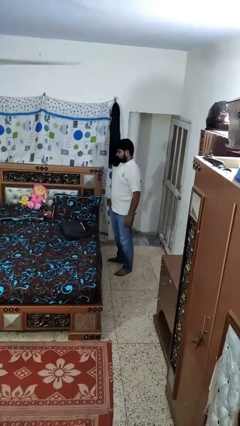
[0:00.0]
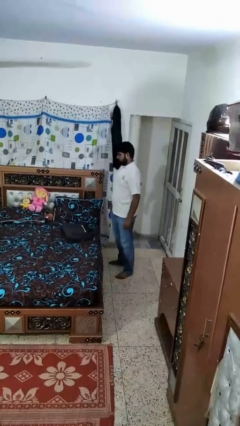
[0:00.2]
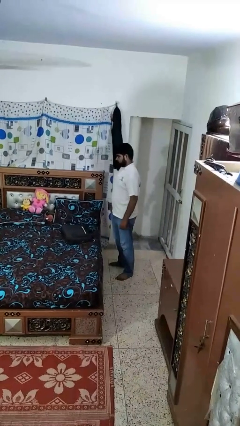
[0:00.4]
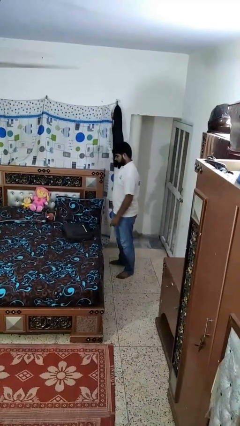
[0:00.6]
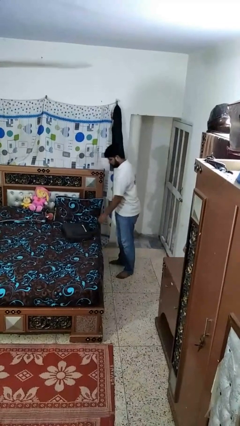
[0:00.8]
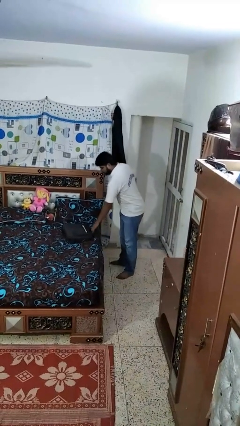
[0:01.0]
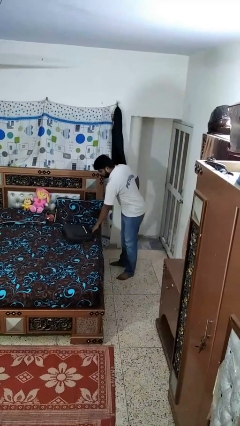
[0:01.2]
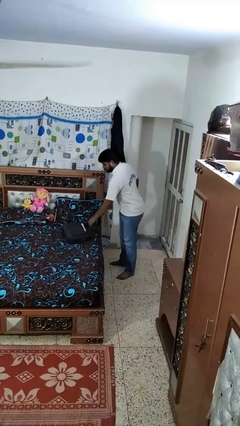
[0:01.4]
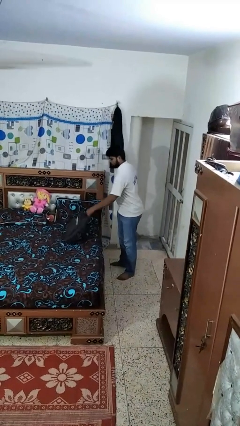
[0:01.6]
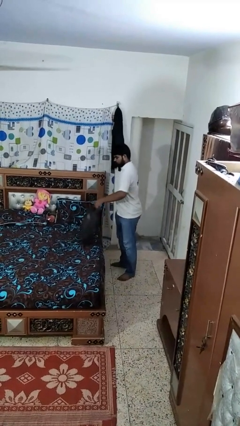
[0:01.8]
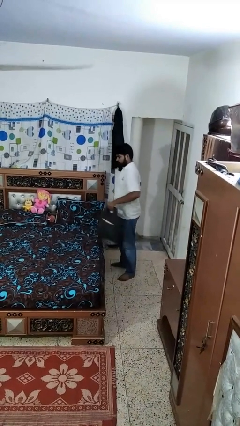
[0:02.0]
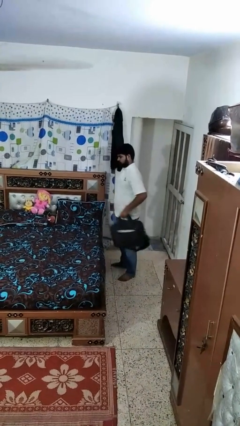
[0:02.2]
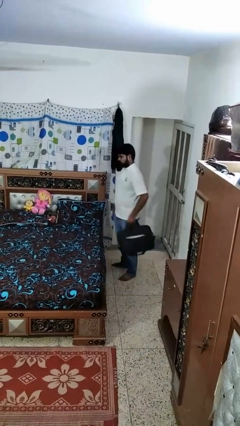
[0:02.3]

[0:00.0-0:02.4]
person picks up object from bed

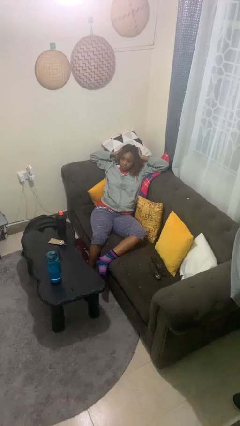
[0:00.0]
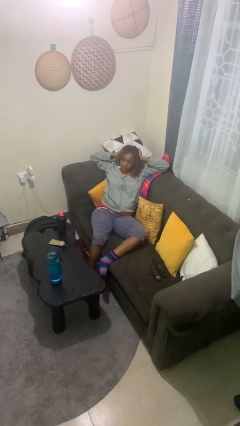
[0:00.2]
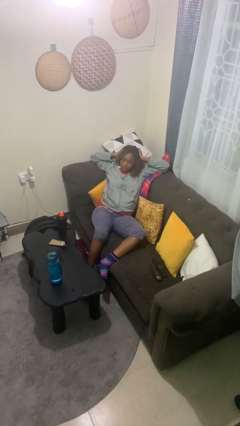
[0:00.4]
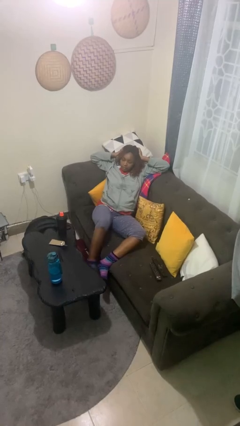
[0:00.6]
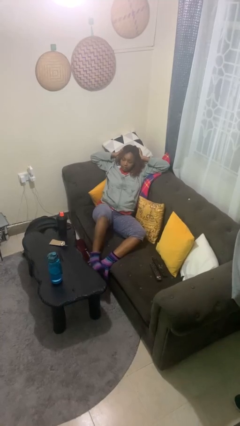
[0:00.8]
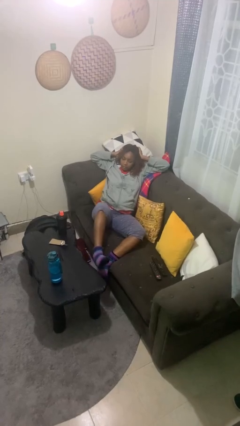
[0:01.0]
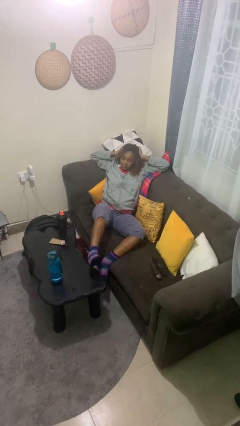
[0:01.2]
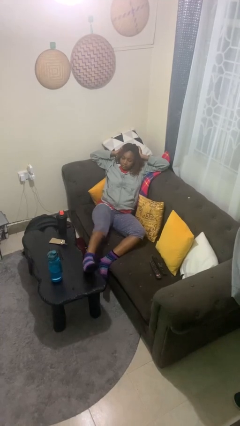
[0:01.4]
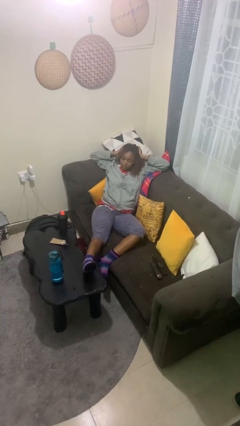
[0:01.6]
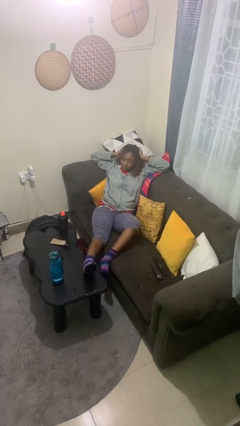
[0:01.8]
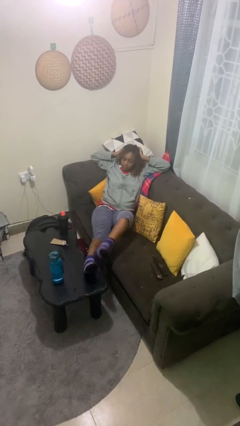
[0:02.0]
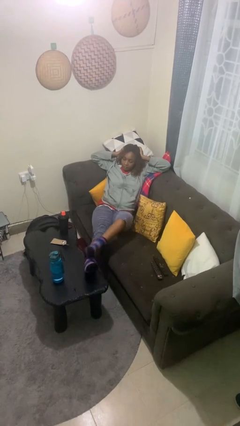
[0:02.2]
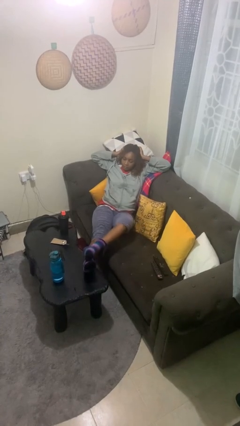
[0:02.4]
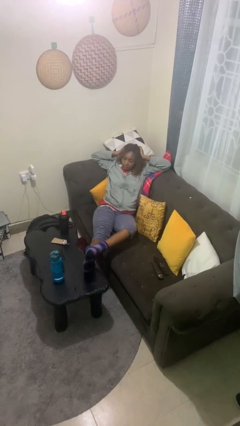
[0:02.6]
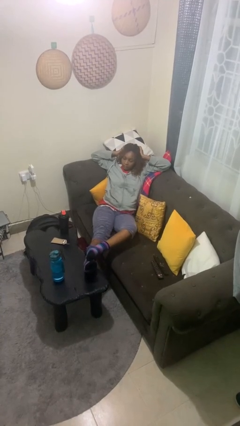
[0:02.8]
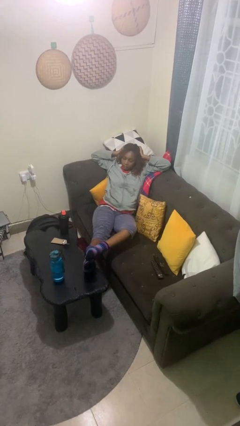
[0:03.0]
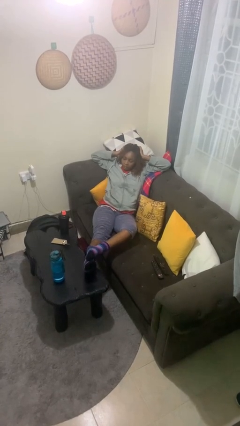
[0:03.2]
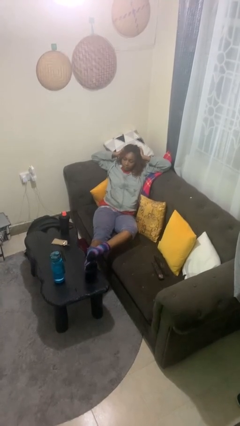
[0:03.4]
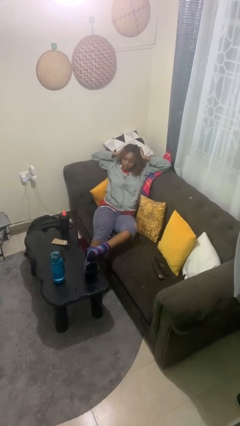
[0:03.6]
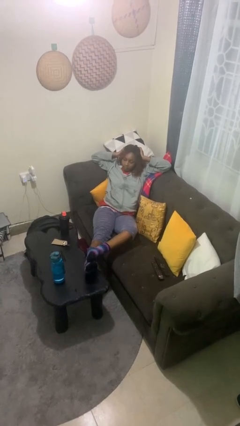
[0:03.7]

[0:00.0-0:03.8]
person puts feet up

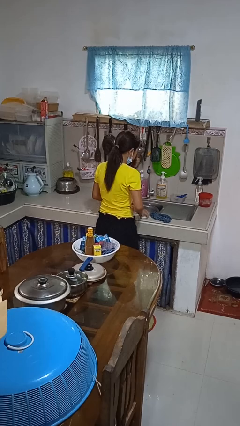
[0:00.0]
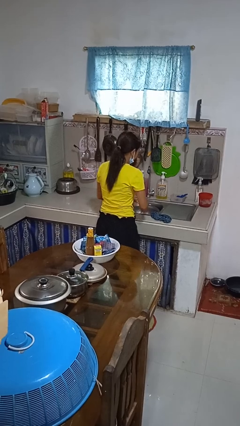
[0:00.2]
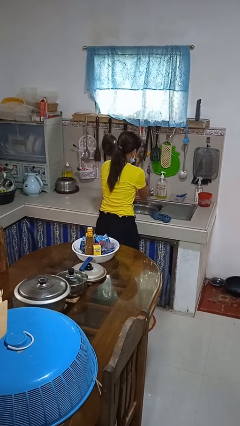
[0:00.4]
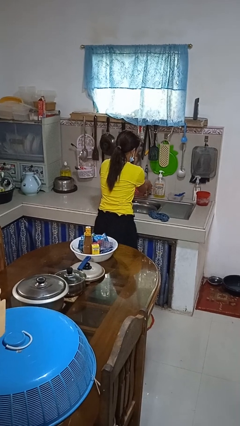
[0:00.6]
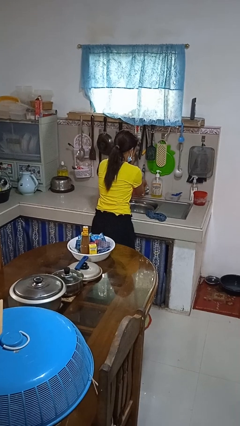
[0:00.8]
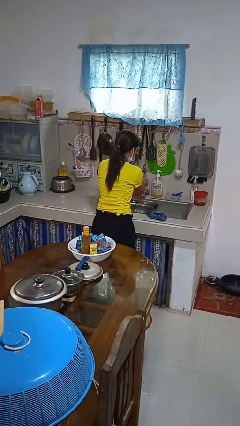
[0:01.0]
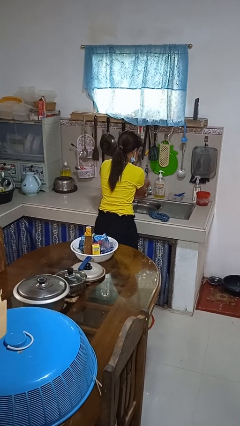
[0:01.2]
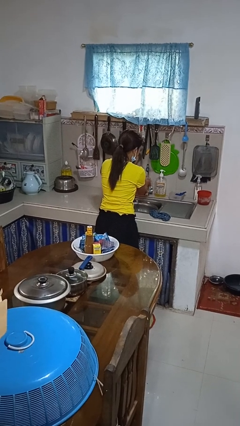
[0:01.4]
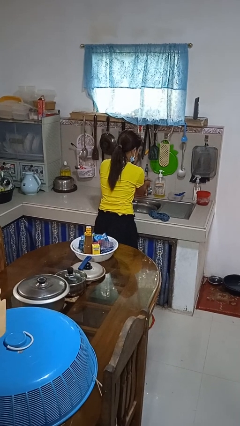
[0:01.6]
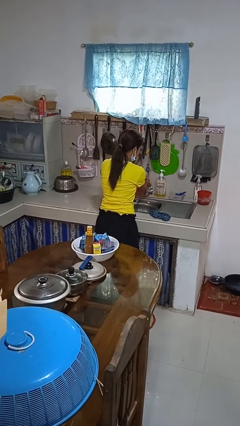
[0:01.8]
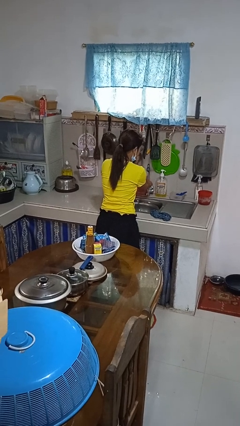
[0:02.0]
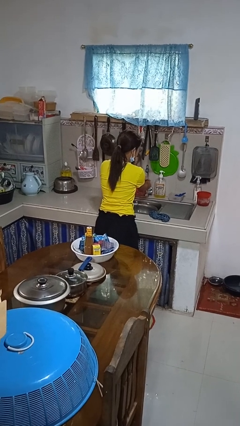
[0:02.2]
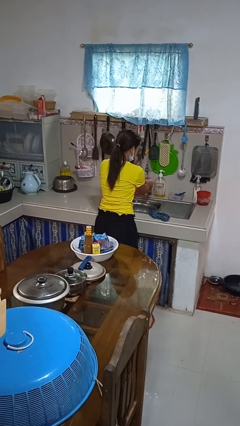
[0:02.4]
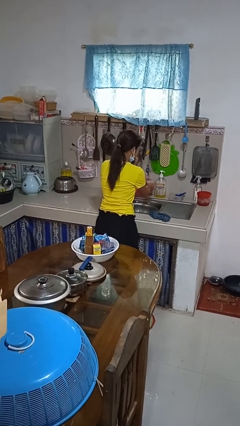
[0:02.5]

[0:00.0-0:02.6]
person washes hands

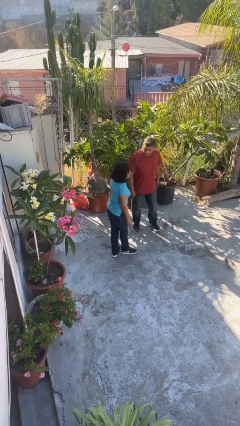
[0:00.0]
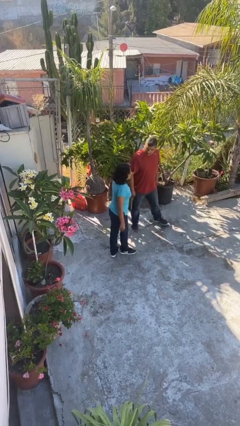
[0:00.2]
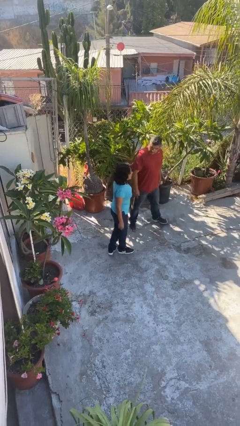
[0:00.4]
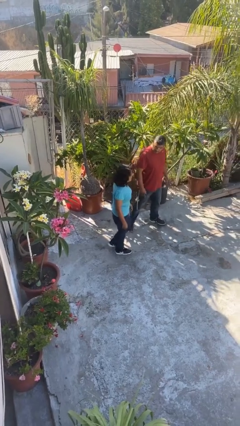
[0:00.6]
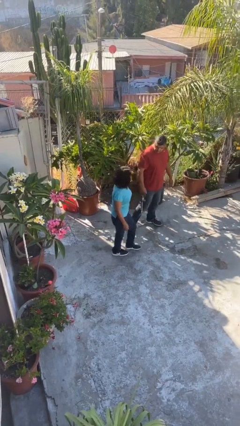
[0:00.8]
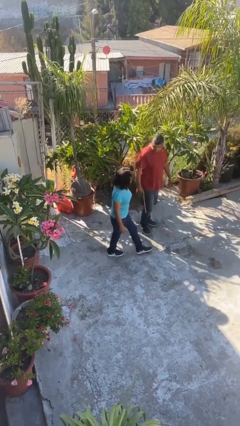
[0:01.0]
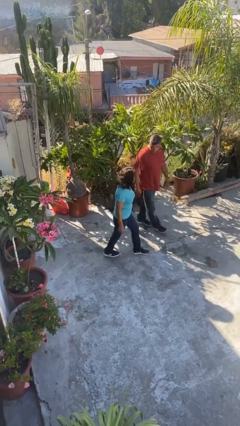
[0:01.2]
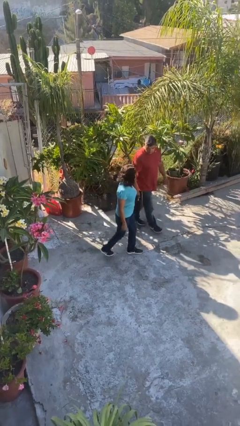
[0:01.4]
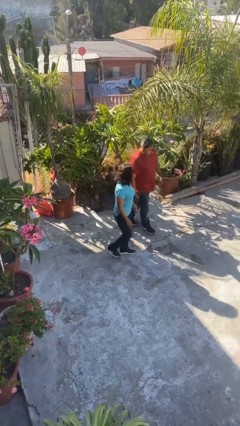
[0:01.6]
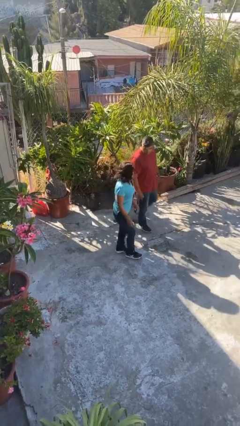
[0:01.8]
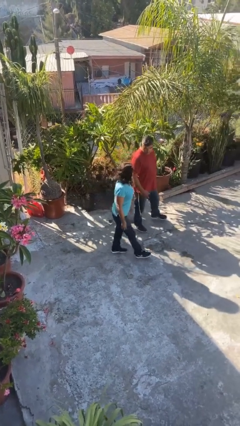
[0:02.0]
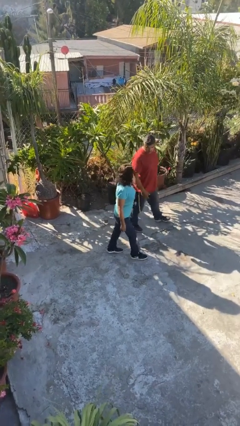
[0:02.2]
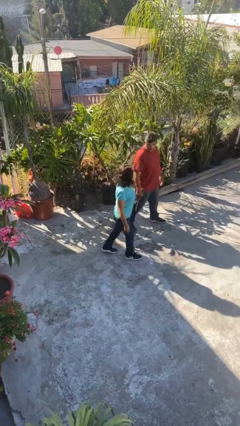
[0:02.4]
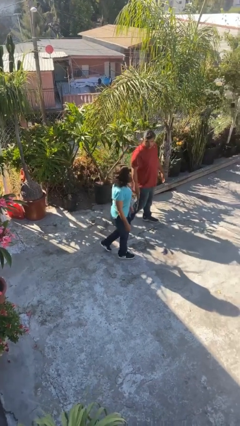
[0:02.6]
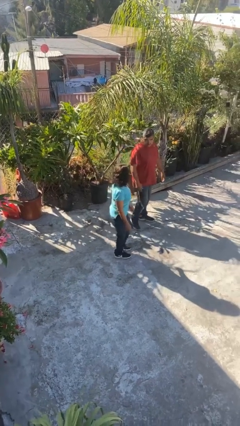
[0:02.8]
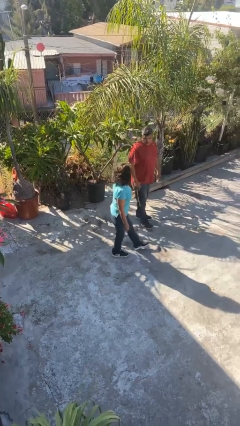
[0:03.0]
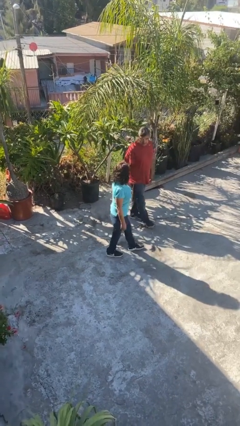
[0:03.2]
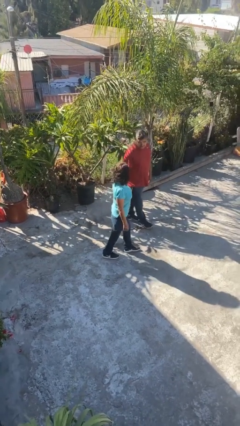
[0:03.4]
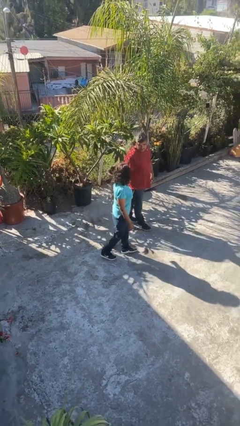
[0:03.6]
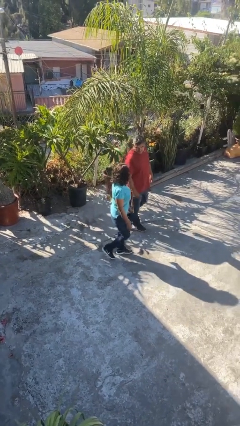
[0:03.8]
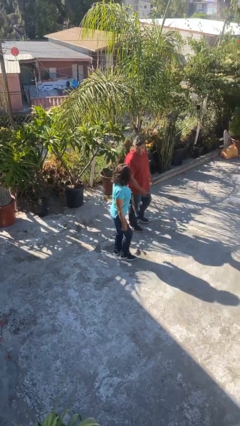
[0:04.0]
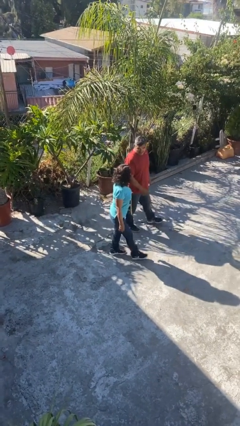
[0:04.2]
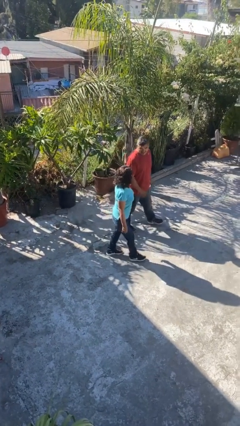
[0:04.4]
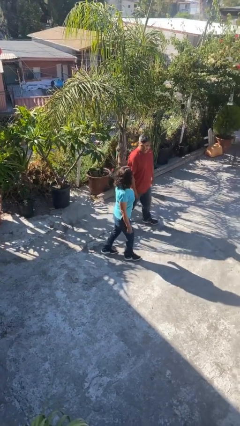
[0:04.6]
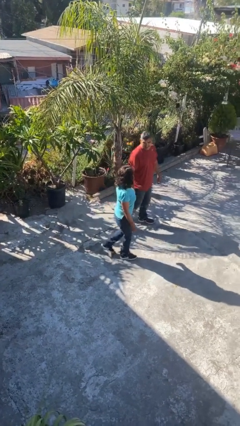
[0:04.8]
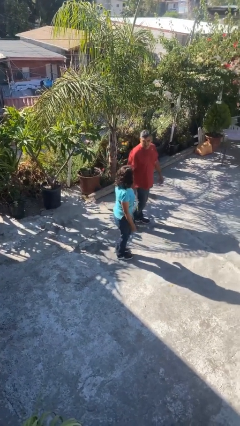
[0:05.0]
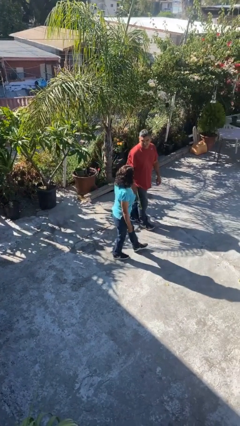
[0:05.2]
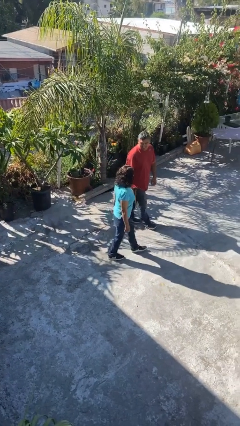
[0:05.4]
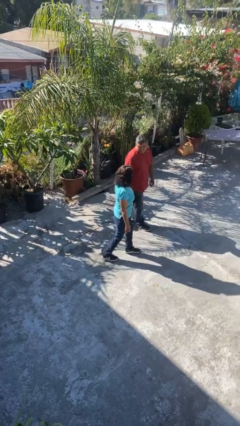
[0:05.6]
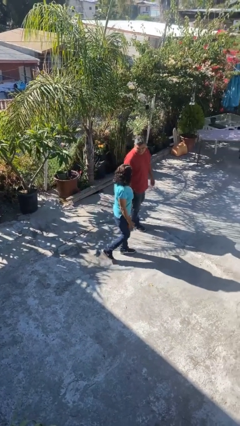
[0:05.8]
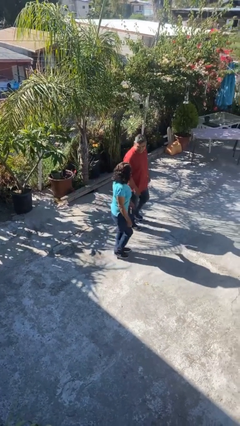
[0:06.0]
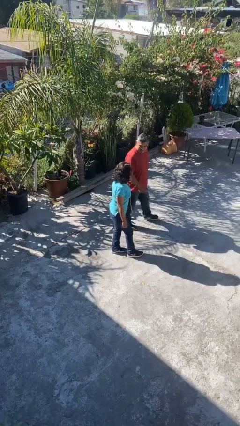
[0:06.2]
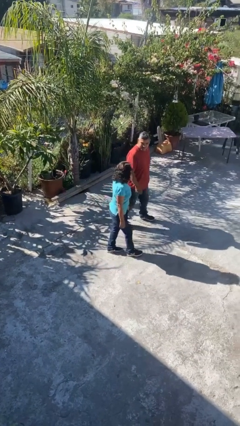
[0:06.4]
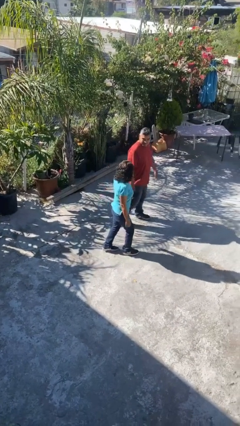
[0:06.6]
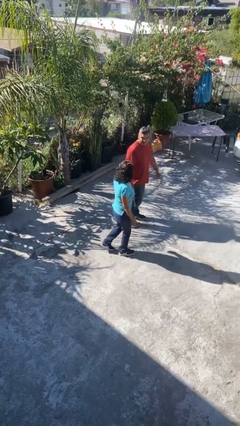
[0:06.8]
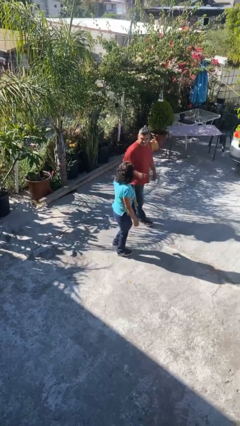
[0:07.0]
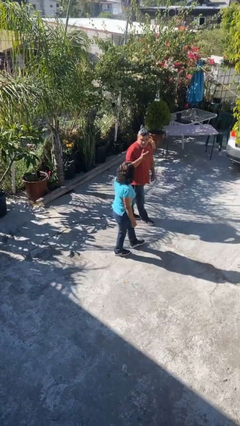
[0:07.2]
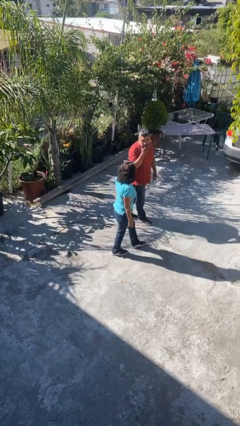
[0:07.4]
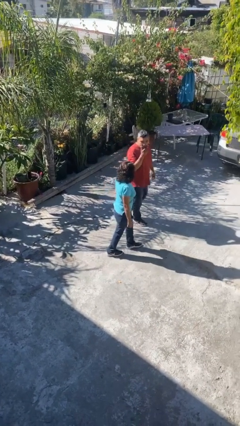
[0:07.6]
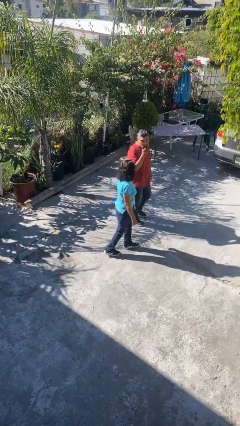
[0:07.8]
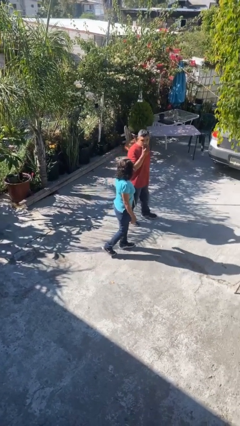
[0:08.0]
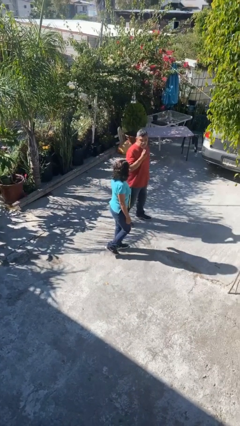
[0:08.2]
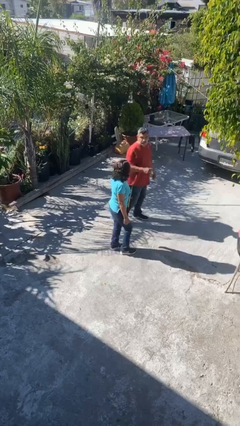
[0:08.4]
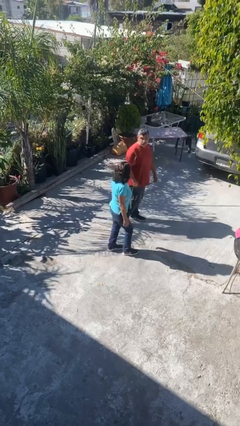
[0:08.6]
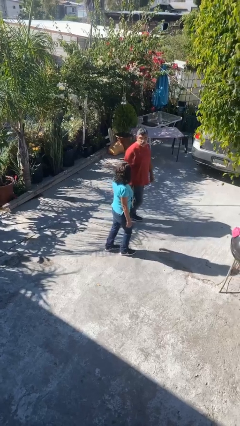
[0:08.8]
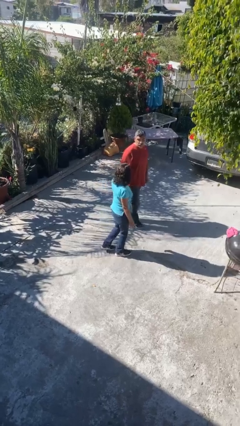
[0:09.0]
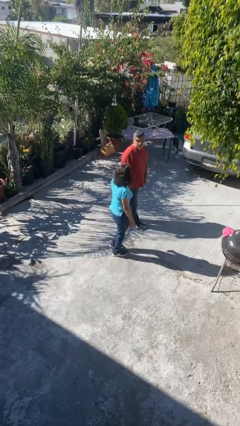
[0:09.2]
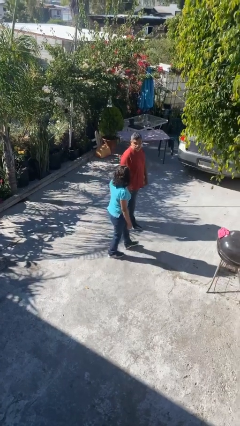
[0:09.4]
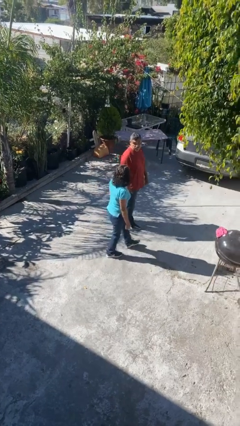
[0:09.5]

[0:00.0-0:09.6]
person talks to person
